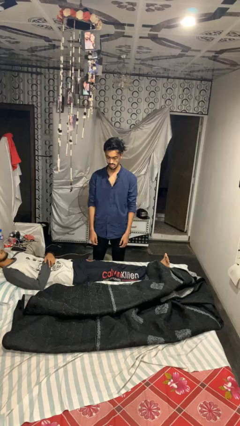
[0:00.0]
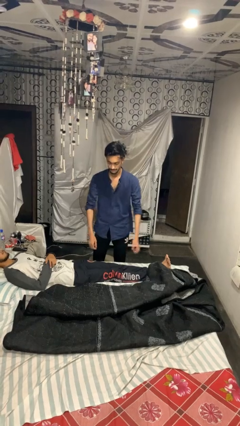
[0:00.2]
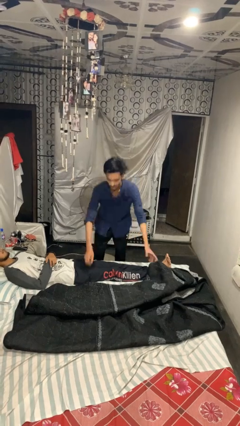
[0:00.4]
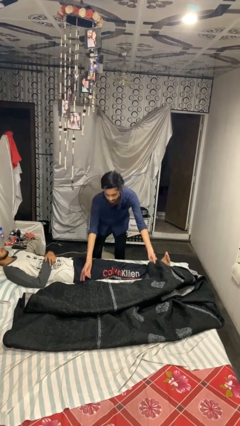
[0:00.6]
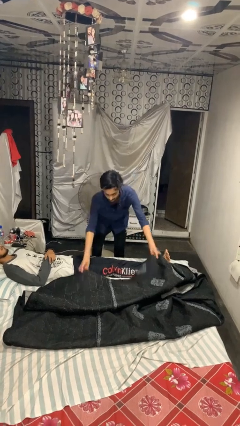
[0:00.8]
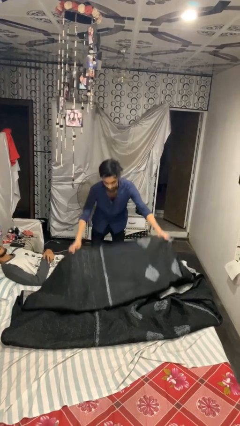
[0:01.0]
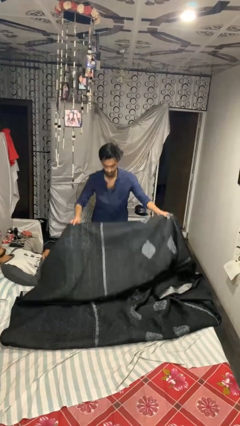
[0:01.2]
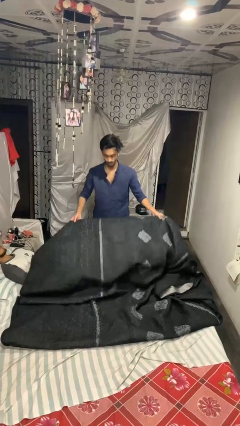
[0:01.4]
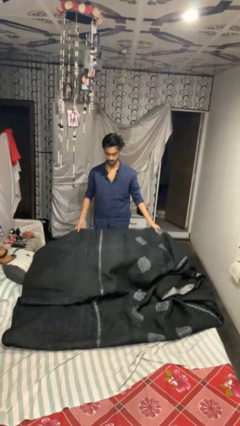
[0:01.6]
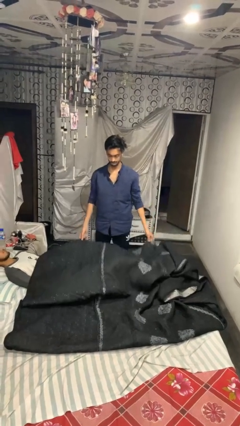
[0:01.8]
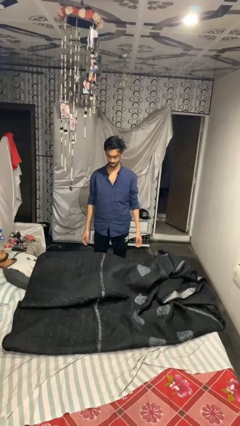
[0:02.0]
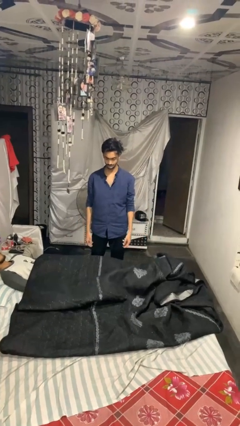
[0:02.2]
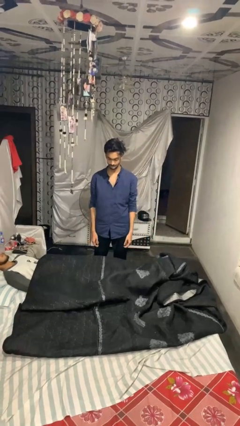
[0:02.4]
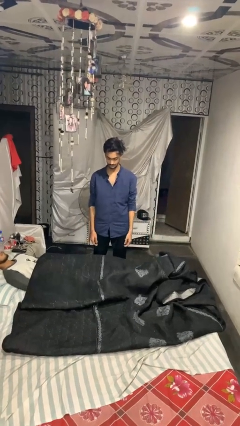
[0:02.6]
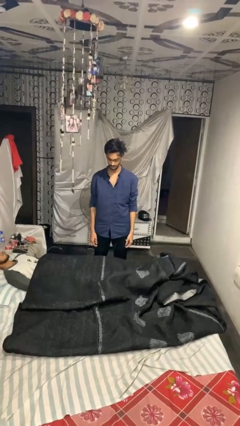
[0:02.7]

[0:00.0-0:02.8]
person covers friend with blanket

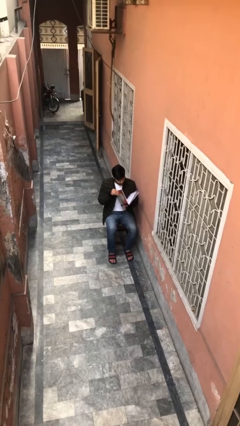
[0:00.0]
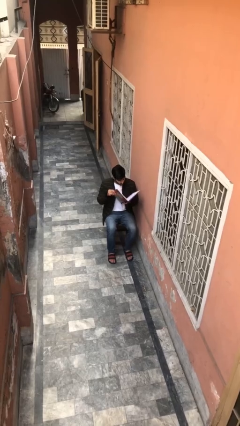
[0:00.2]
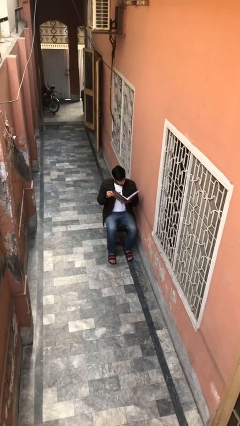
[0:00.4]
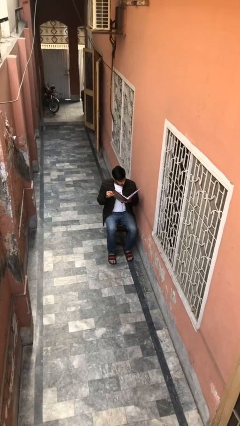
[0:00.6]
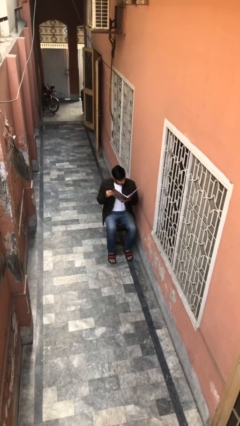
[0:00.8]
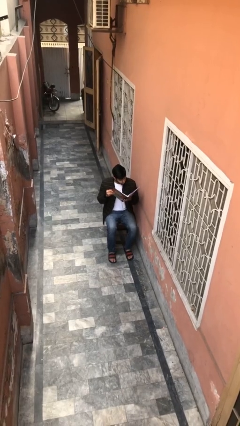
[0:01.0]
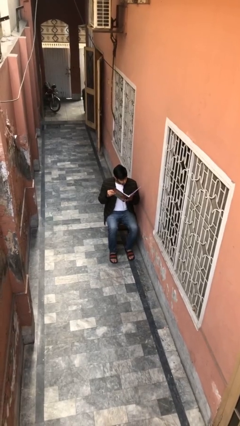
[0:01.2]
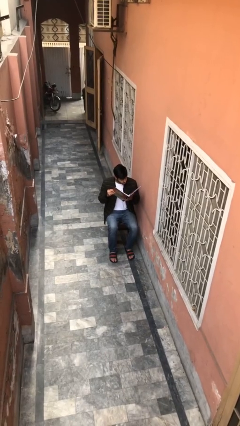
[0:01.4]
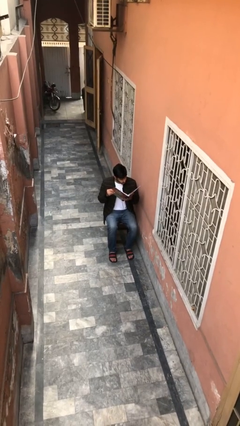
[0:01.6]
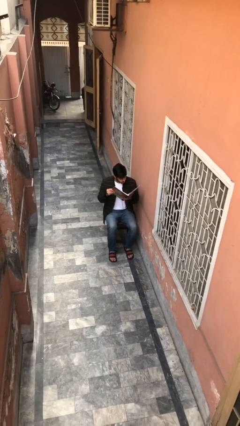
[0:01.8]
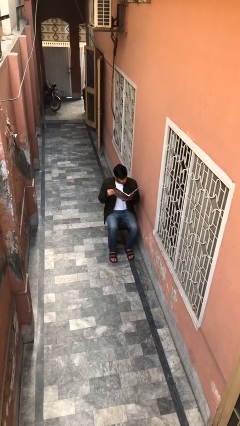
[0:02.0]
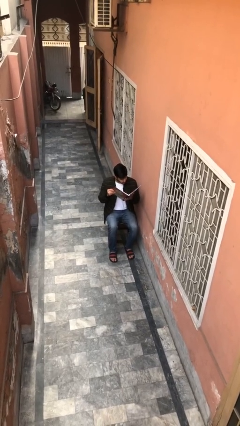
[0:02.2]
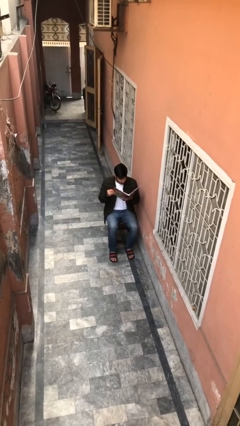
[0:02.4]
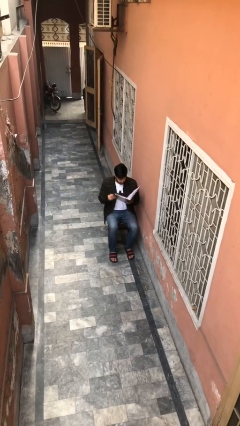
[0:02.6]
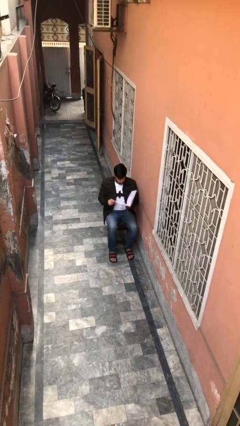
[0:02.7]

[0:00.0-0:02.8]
person reads document

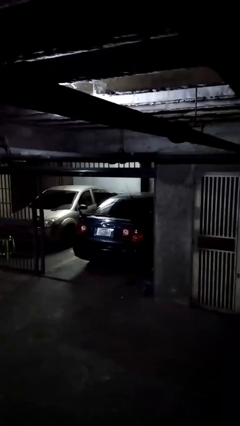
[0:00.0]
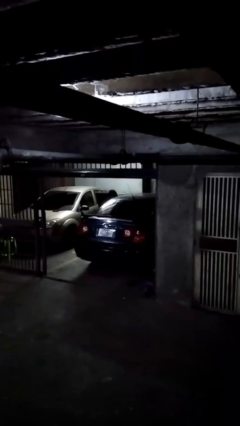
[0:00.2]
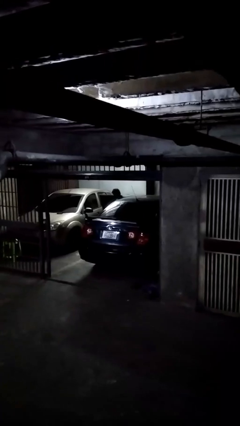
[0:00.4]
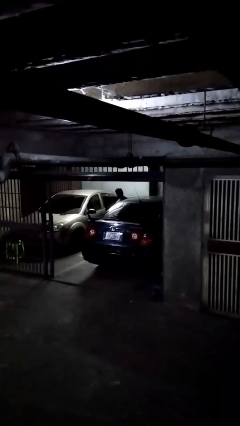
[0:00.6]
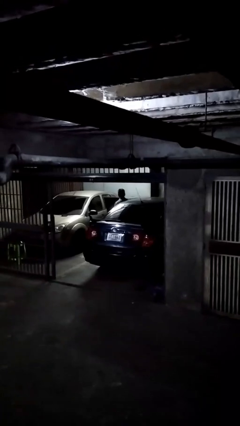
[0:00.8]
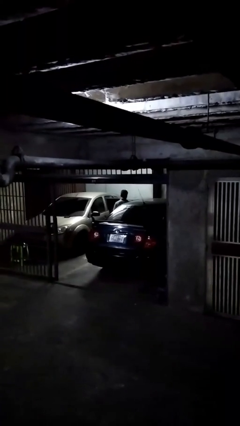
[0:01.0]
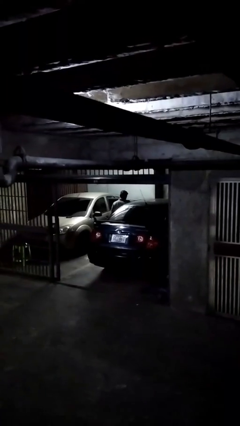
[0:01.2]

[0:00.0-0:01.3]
person exits car

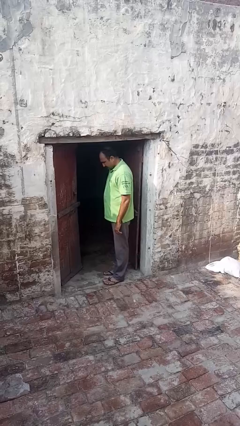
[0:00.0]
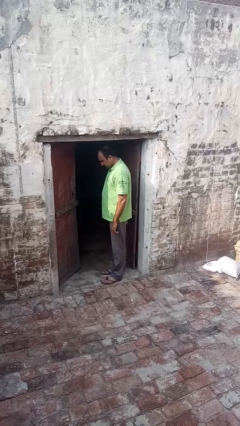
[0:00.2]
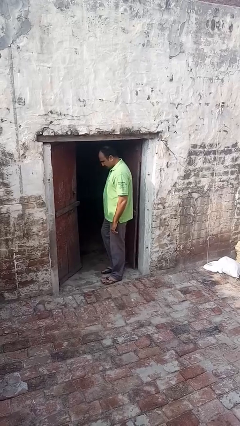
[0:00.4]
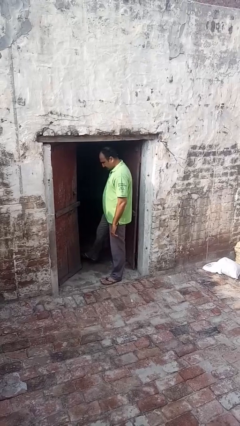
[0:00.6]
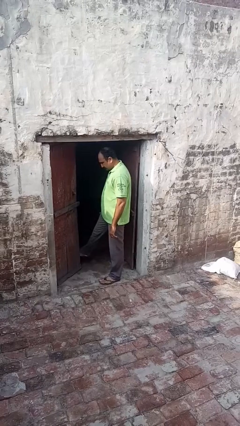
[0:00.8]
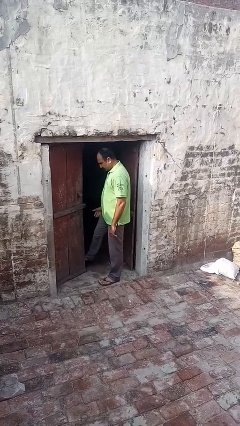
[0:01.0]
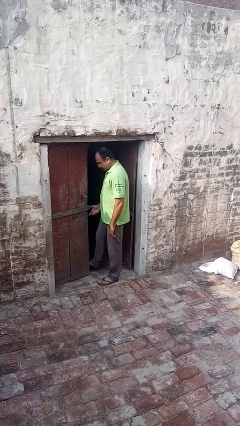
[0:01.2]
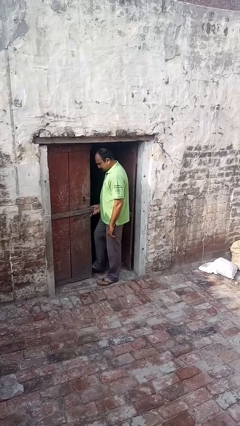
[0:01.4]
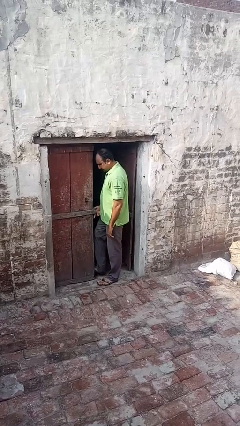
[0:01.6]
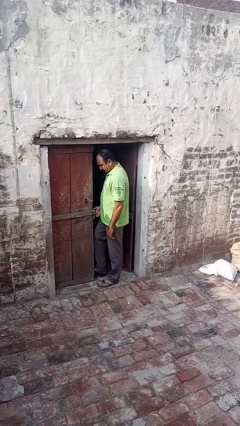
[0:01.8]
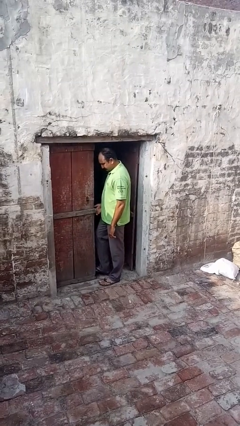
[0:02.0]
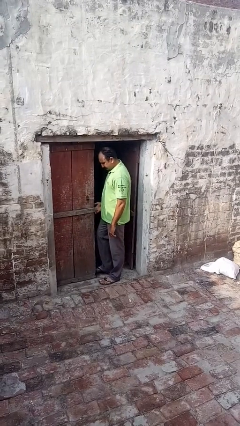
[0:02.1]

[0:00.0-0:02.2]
person closes door with foot

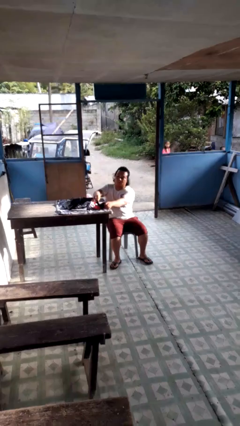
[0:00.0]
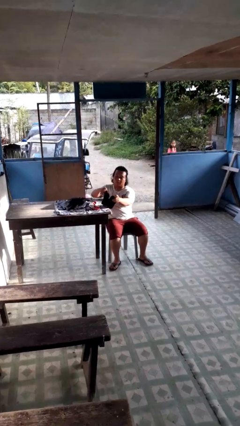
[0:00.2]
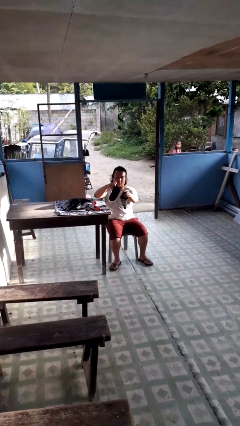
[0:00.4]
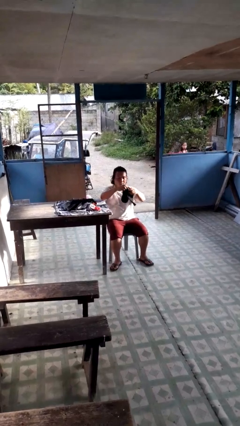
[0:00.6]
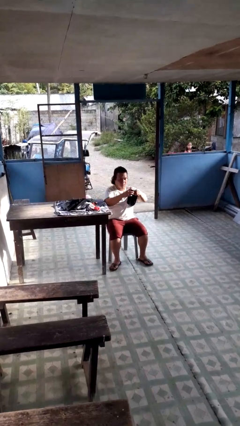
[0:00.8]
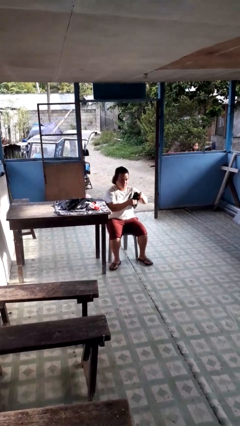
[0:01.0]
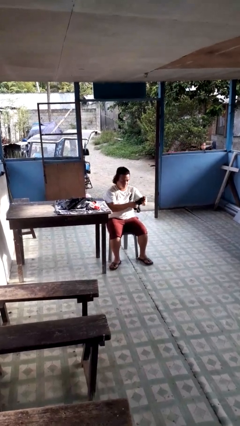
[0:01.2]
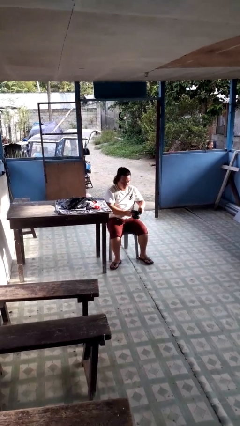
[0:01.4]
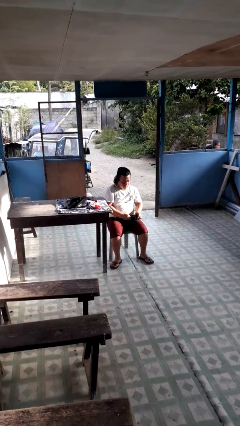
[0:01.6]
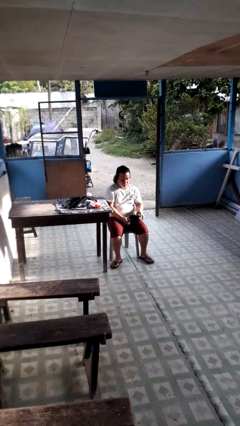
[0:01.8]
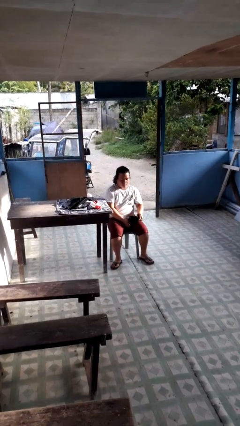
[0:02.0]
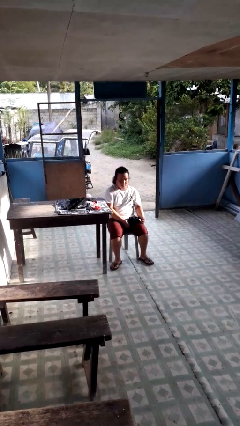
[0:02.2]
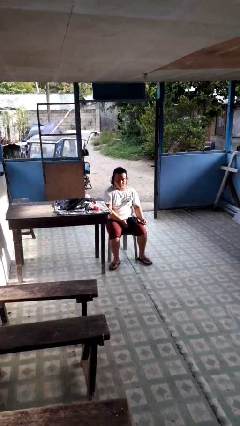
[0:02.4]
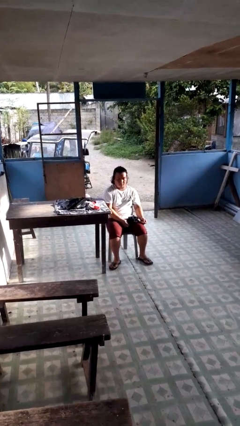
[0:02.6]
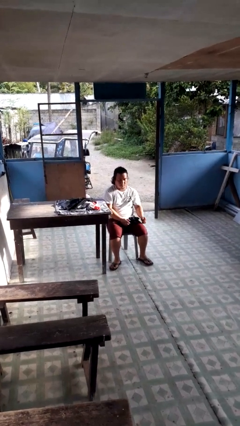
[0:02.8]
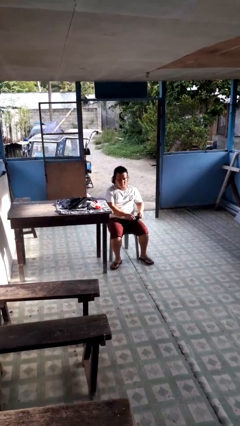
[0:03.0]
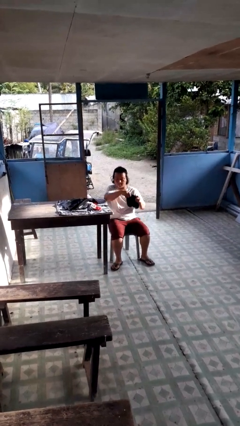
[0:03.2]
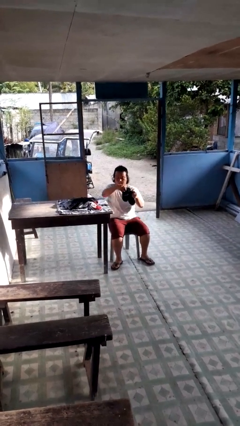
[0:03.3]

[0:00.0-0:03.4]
person folds socks

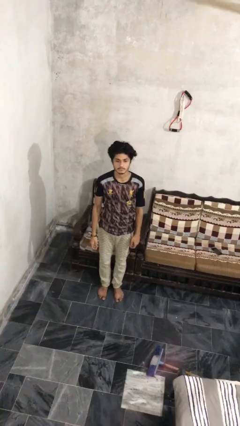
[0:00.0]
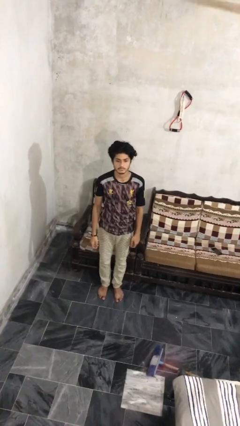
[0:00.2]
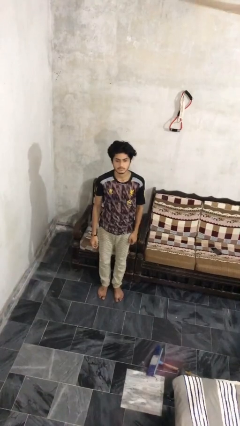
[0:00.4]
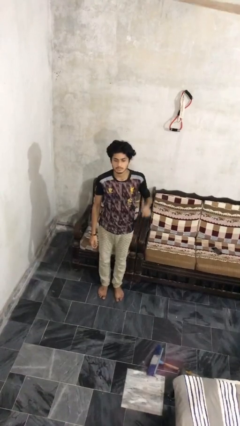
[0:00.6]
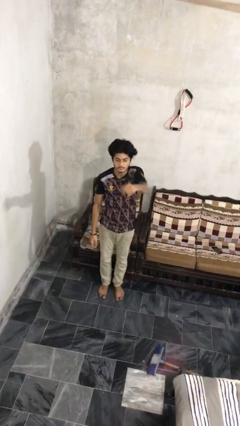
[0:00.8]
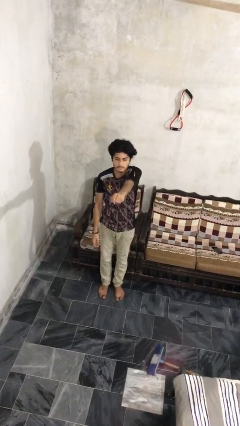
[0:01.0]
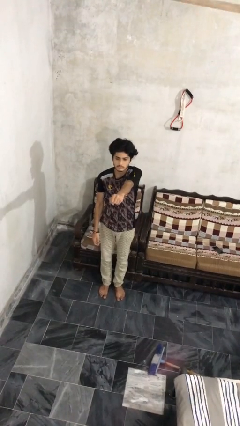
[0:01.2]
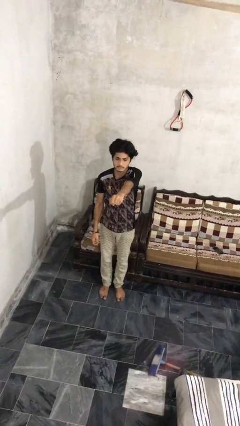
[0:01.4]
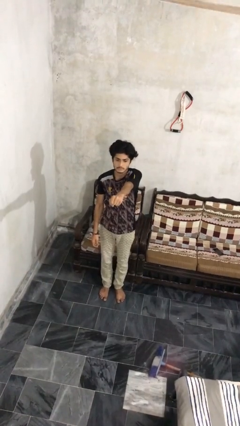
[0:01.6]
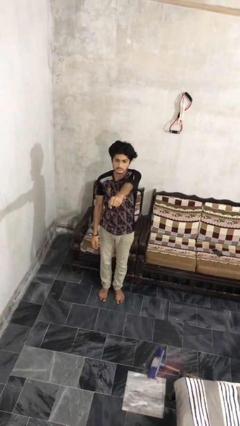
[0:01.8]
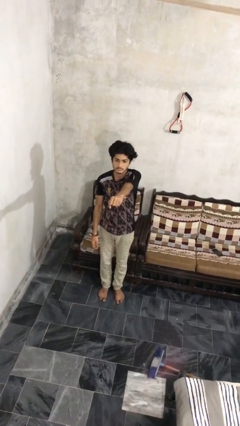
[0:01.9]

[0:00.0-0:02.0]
person punches

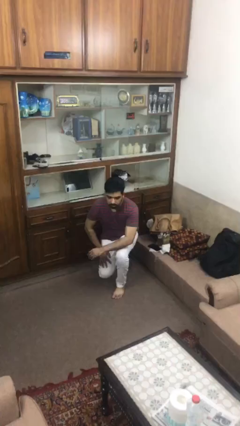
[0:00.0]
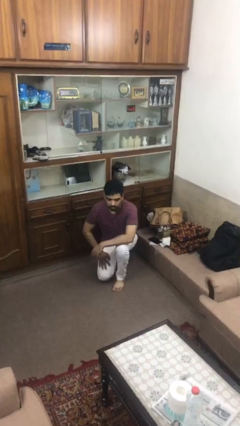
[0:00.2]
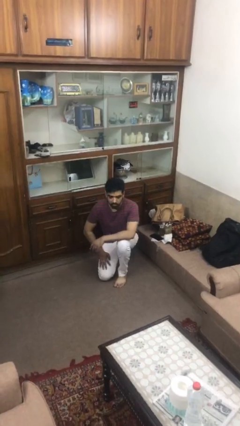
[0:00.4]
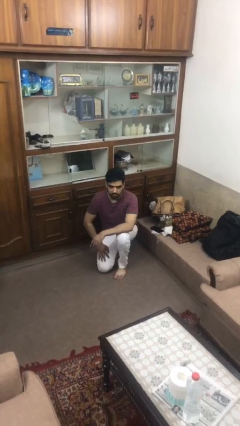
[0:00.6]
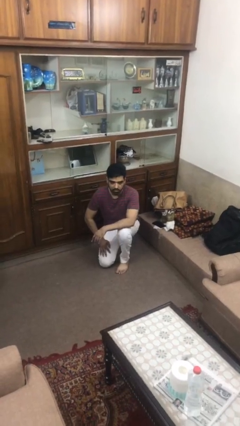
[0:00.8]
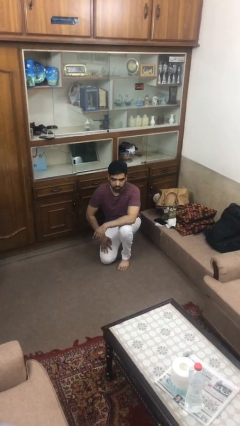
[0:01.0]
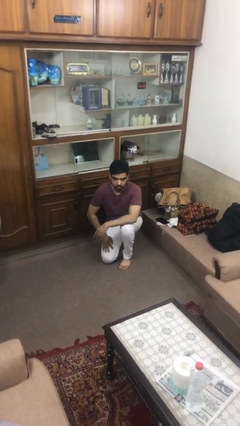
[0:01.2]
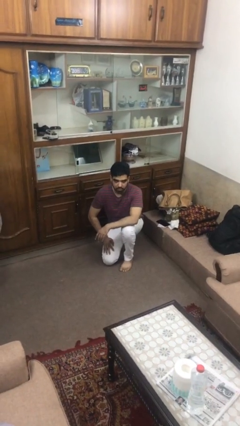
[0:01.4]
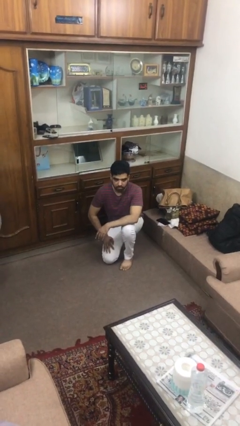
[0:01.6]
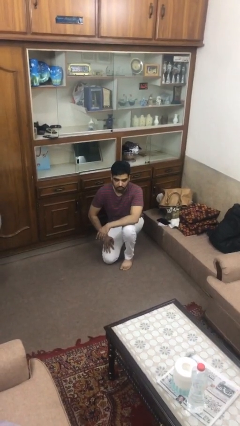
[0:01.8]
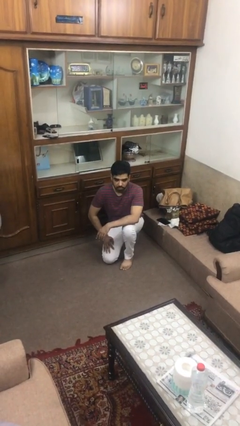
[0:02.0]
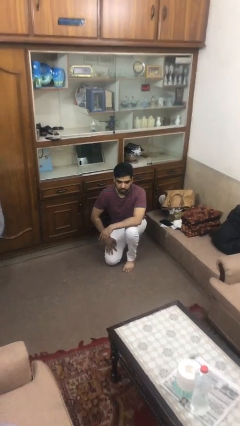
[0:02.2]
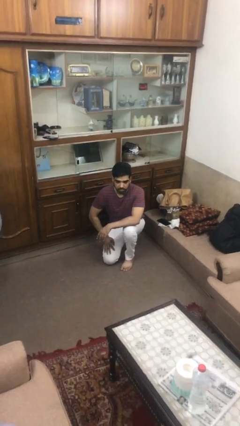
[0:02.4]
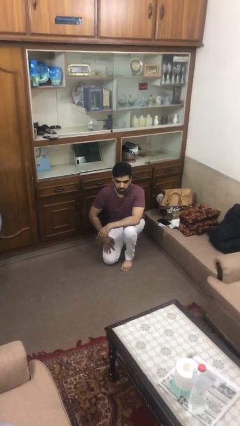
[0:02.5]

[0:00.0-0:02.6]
person kneels

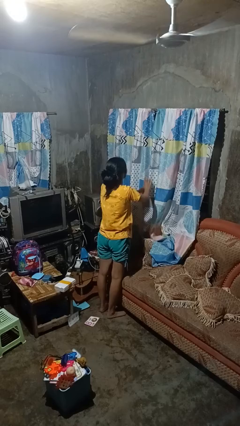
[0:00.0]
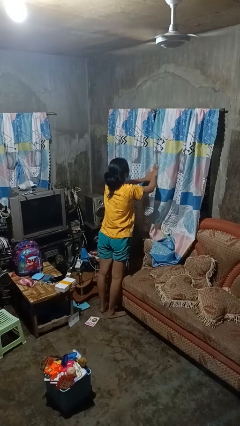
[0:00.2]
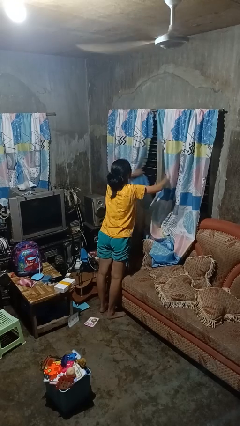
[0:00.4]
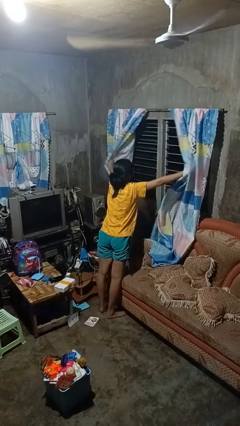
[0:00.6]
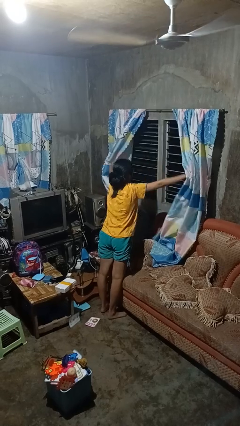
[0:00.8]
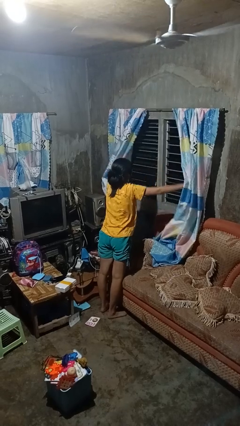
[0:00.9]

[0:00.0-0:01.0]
person opens curtains
